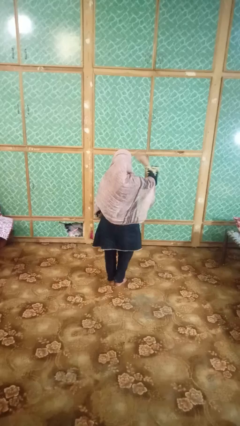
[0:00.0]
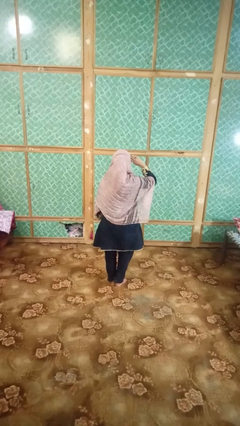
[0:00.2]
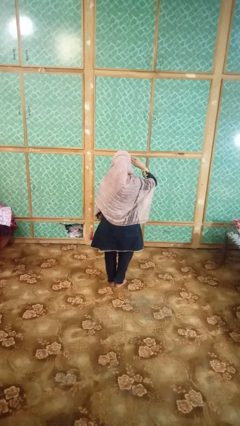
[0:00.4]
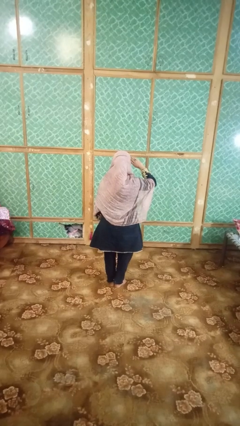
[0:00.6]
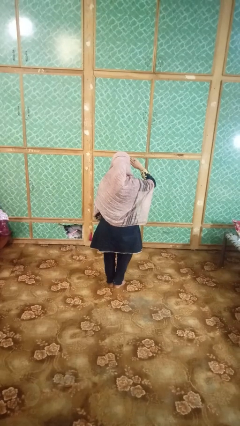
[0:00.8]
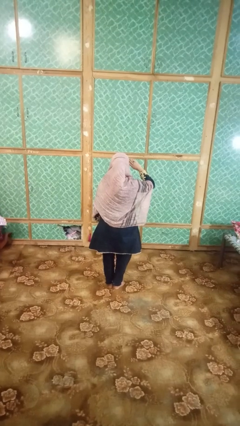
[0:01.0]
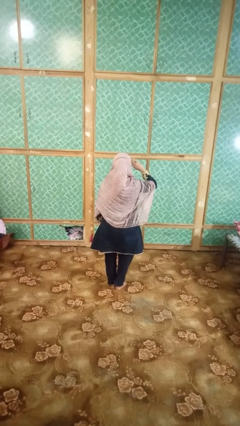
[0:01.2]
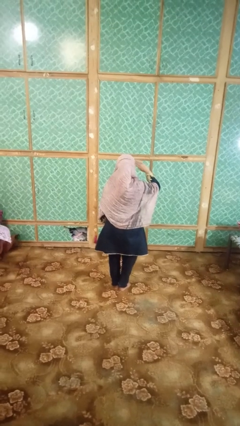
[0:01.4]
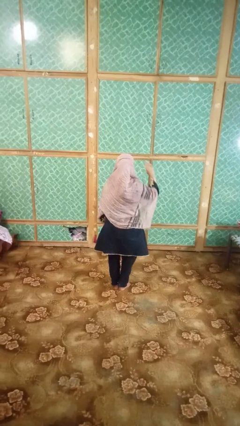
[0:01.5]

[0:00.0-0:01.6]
person salutes

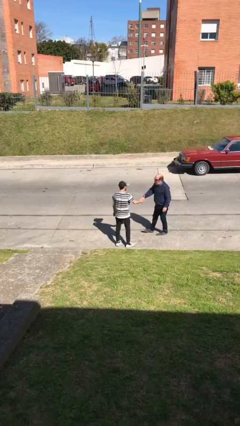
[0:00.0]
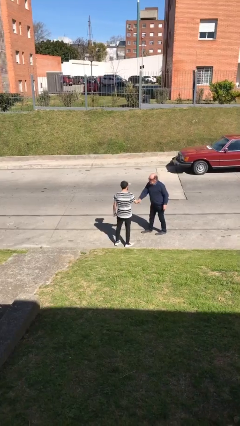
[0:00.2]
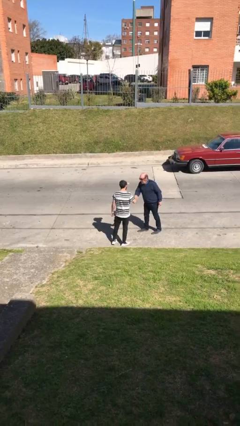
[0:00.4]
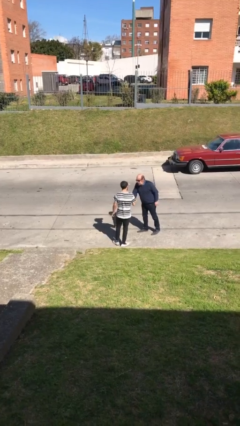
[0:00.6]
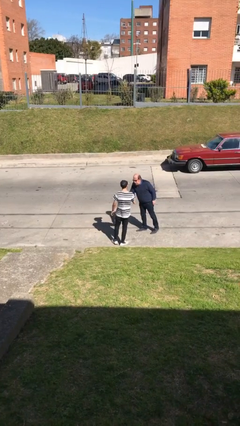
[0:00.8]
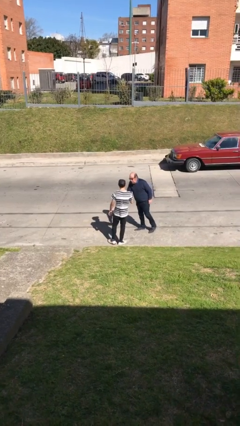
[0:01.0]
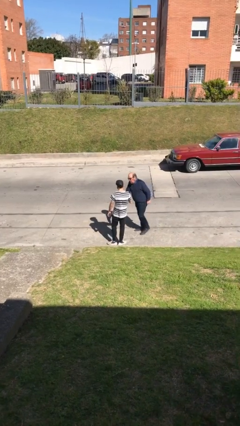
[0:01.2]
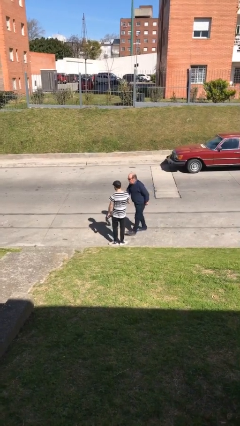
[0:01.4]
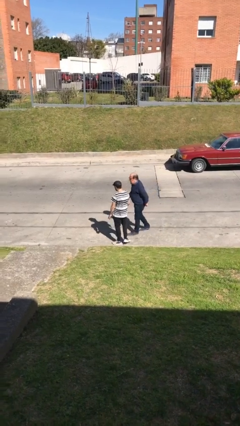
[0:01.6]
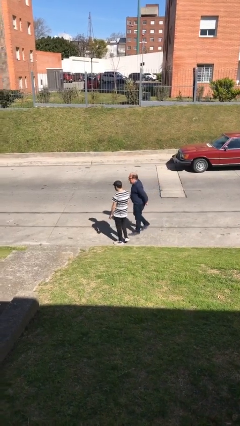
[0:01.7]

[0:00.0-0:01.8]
person shakes hand

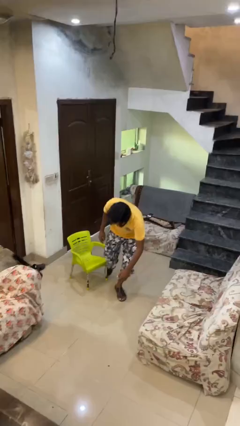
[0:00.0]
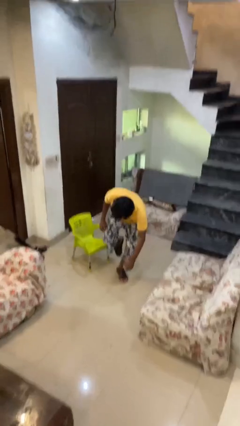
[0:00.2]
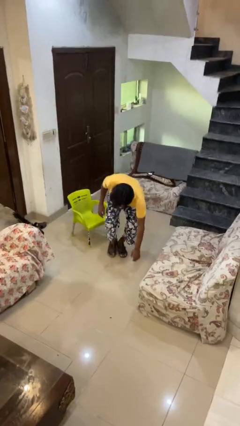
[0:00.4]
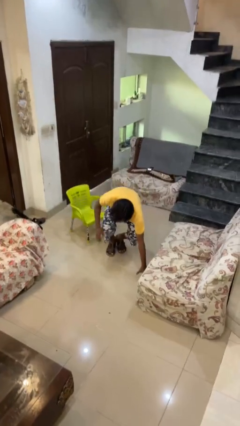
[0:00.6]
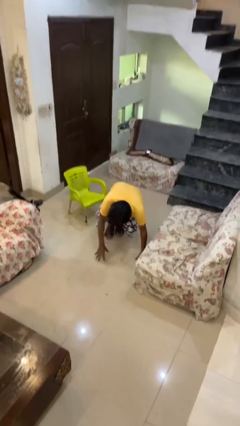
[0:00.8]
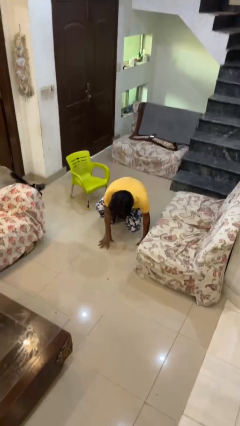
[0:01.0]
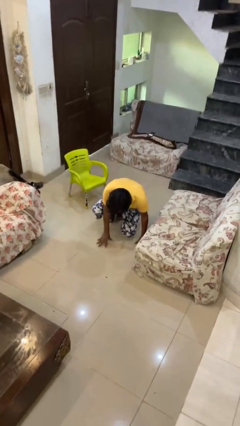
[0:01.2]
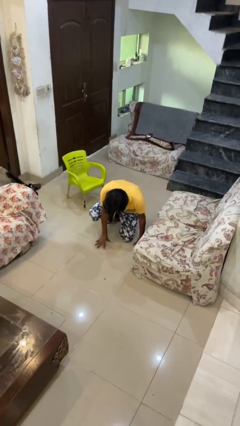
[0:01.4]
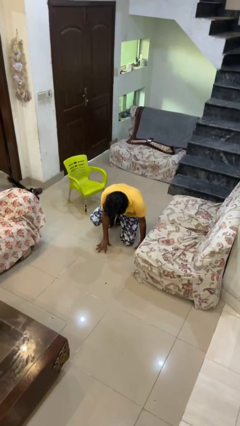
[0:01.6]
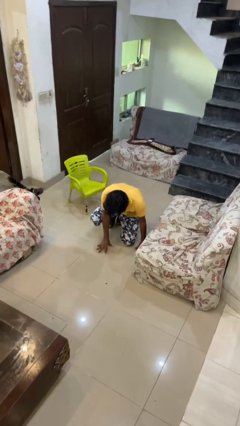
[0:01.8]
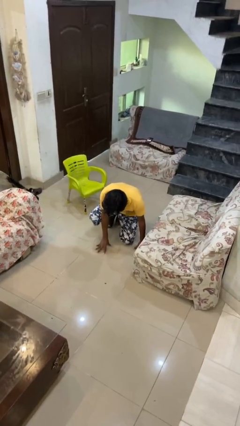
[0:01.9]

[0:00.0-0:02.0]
person lies down on floor

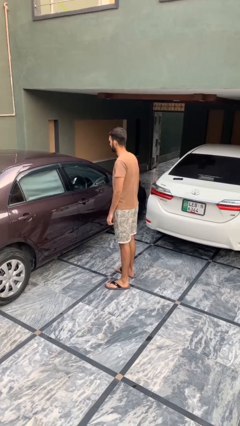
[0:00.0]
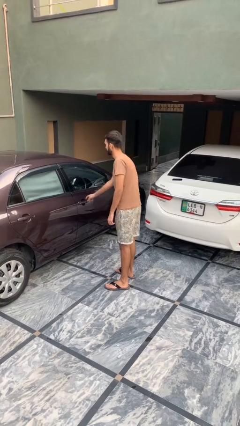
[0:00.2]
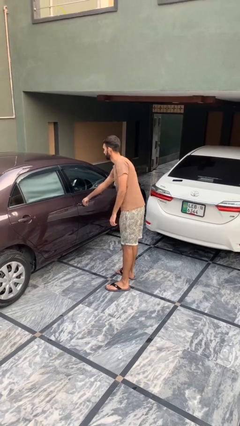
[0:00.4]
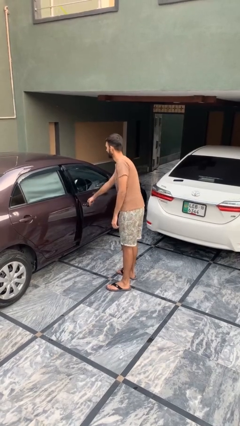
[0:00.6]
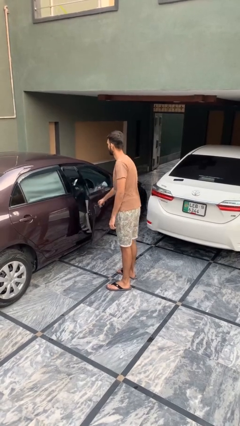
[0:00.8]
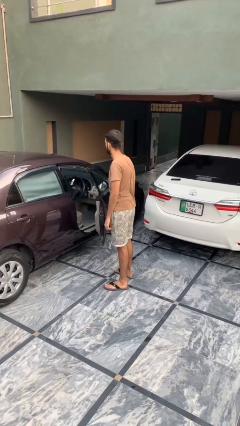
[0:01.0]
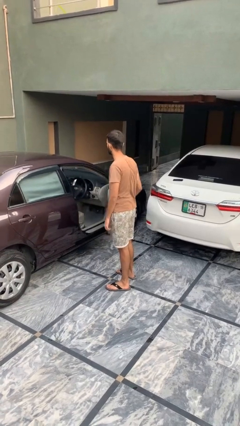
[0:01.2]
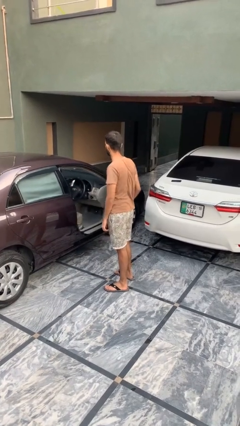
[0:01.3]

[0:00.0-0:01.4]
person opens car door

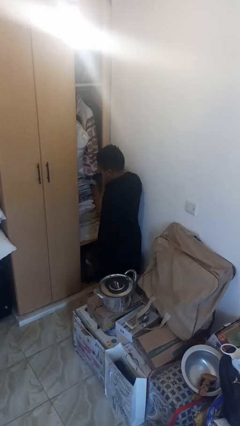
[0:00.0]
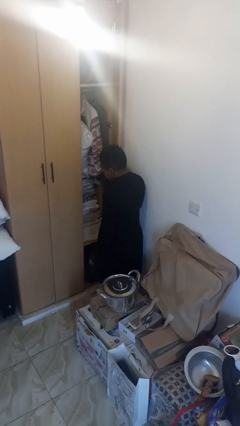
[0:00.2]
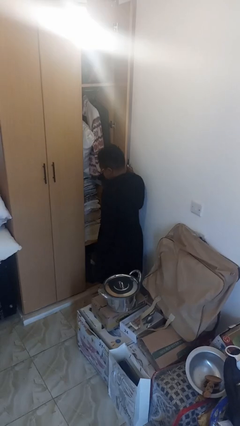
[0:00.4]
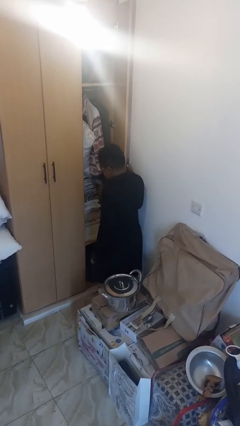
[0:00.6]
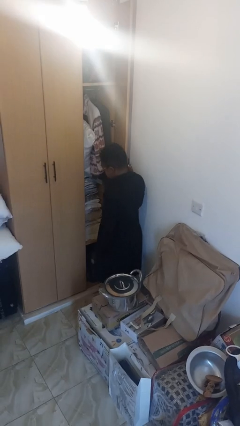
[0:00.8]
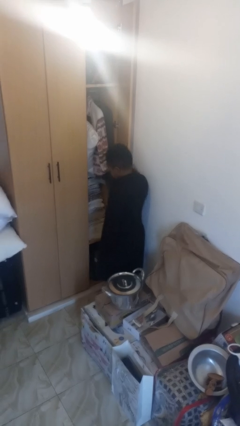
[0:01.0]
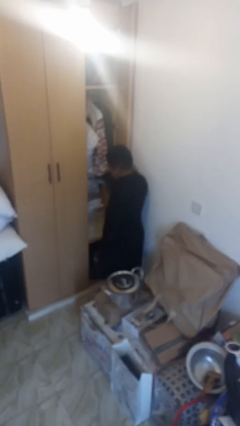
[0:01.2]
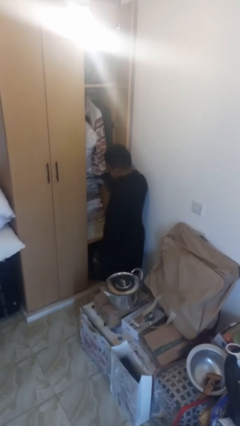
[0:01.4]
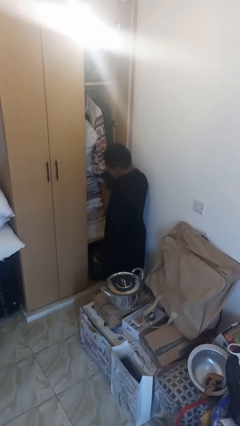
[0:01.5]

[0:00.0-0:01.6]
person opens closet door

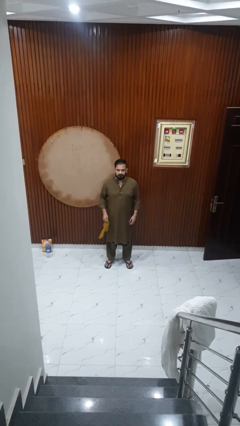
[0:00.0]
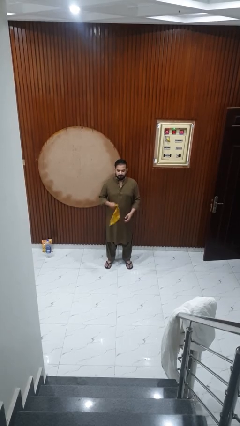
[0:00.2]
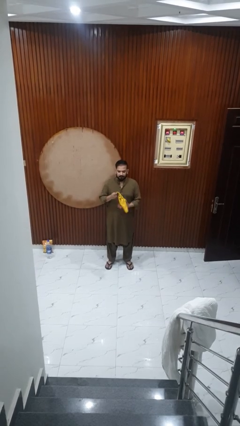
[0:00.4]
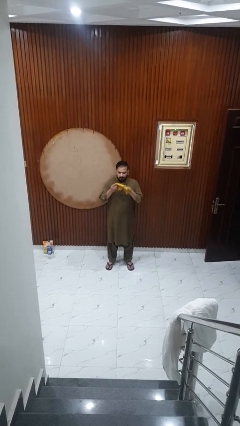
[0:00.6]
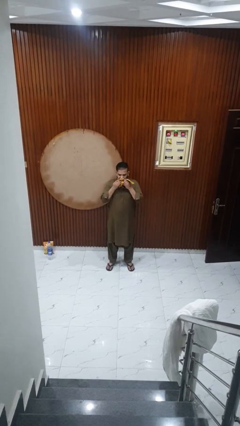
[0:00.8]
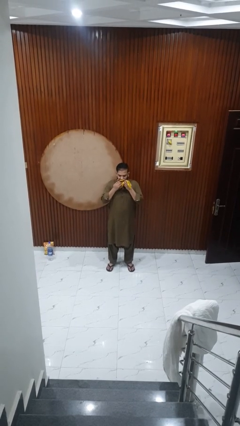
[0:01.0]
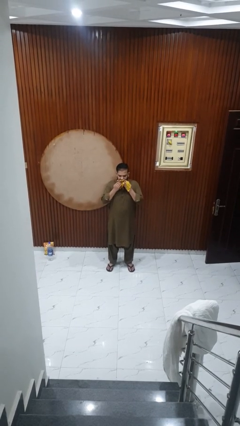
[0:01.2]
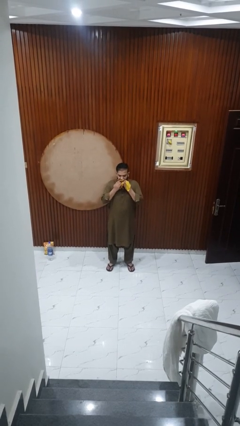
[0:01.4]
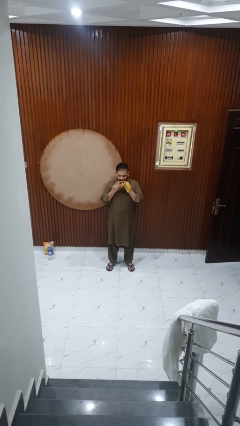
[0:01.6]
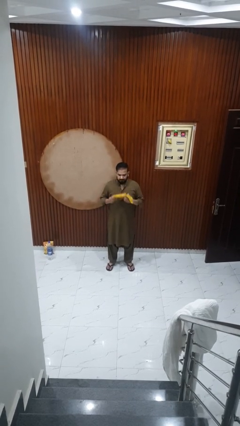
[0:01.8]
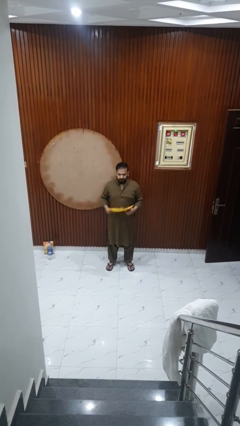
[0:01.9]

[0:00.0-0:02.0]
person wipes mouth with napkin

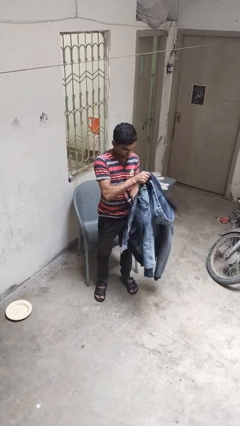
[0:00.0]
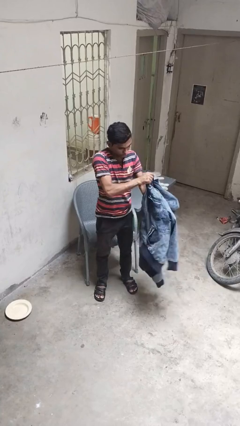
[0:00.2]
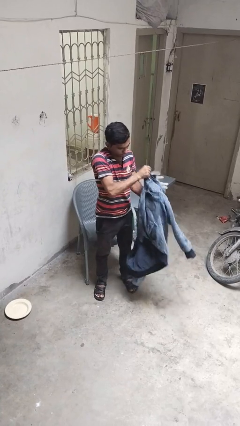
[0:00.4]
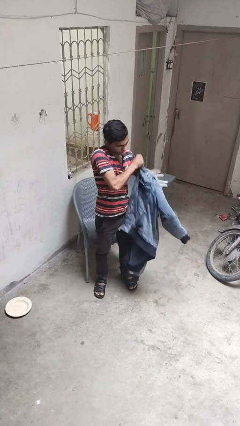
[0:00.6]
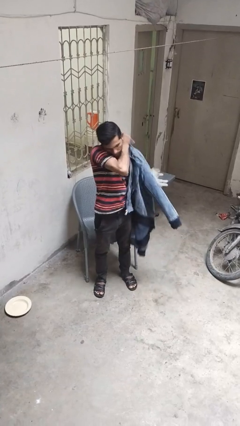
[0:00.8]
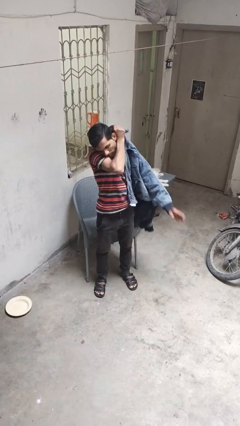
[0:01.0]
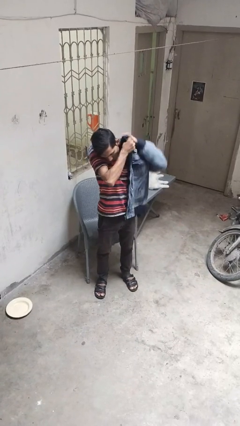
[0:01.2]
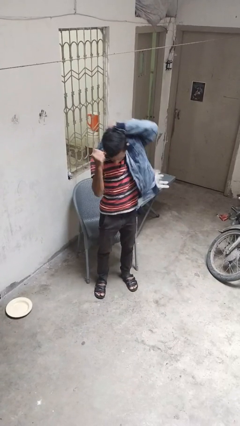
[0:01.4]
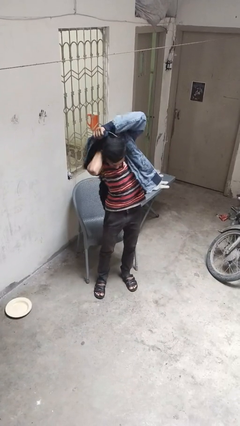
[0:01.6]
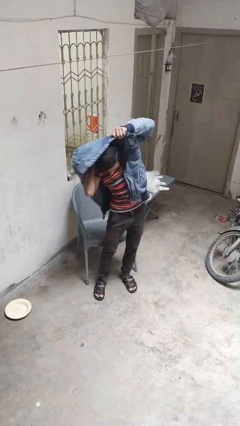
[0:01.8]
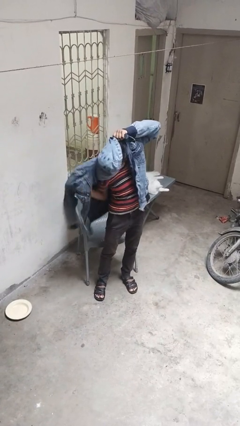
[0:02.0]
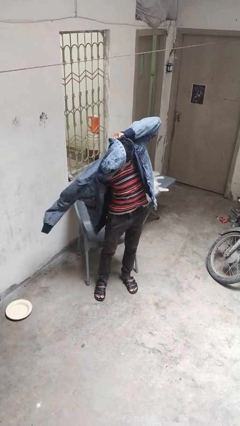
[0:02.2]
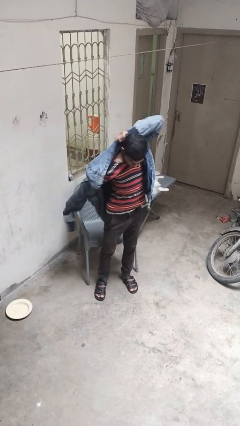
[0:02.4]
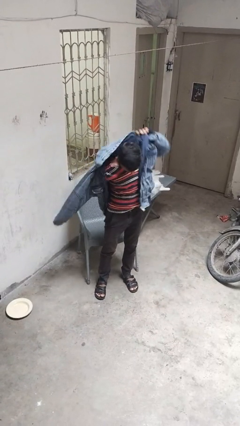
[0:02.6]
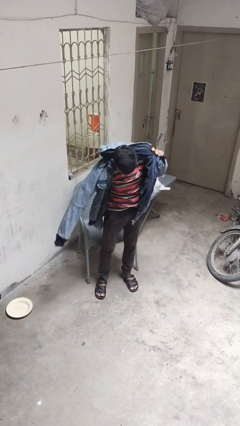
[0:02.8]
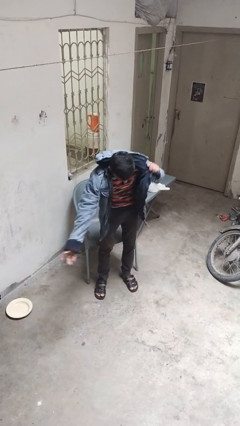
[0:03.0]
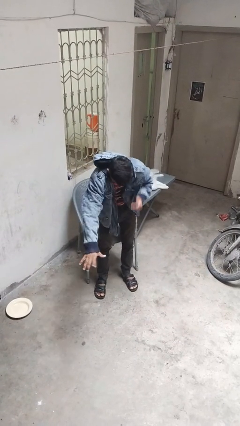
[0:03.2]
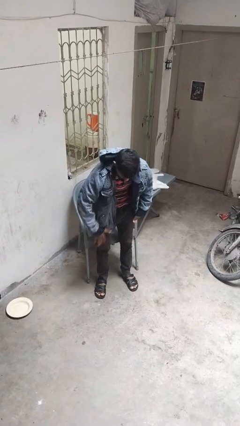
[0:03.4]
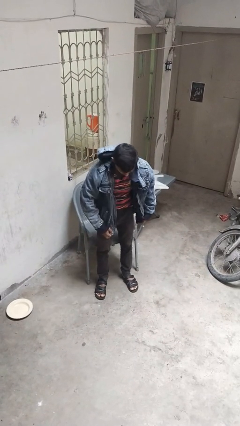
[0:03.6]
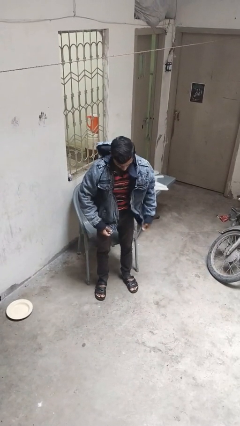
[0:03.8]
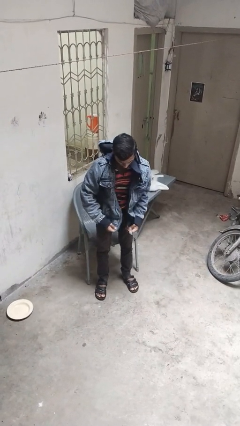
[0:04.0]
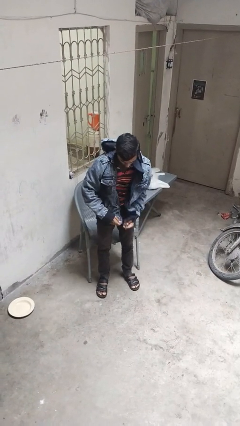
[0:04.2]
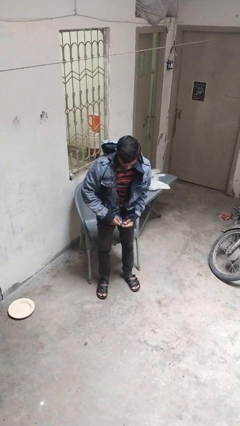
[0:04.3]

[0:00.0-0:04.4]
person puts on jacket

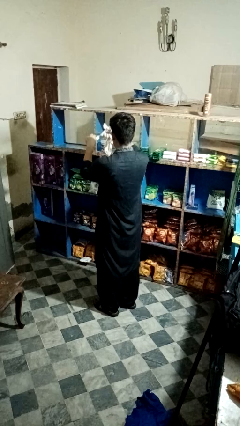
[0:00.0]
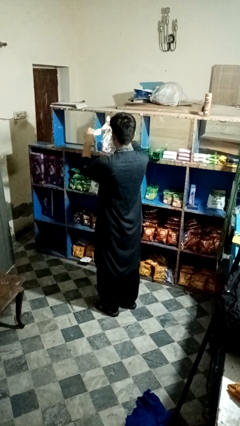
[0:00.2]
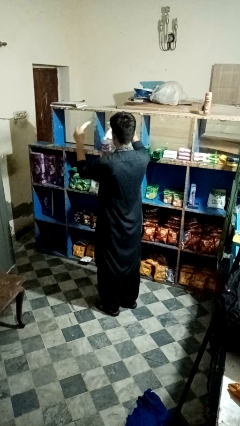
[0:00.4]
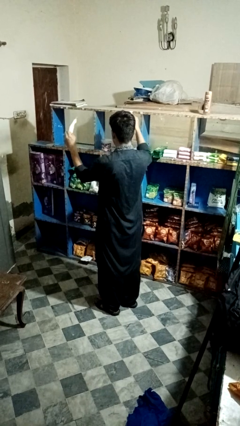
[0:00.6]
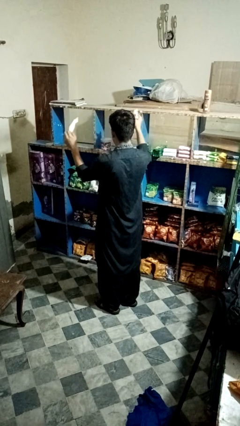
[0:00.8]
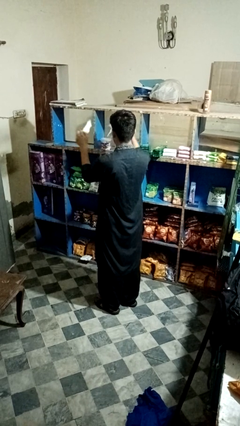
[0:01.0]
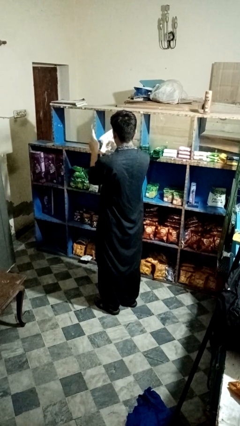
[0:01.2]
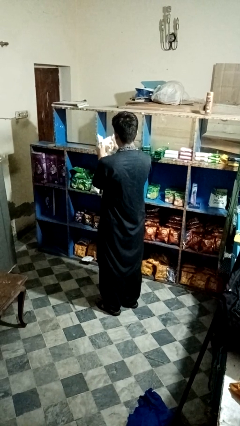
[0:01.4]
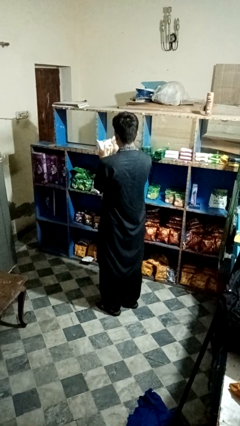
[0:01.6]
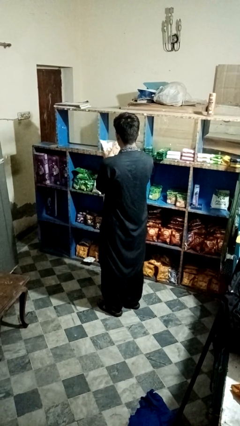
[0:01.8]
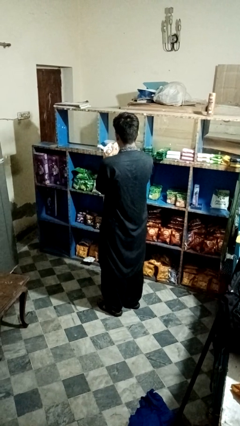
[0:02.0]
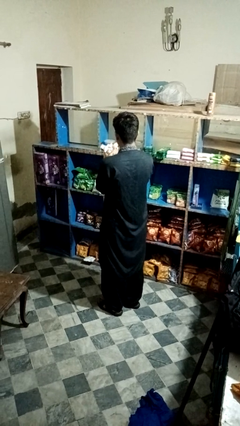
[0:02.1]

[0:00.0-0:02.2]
person tears paper
